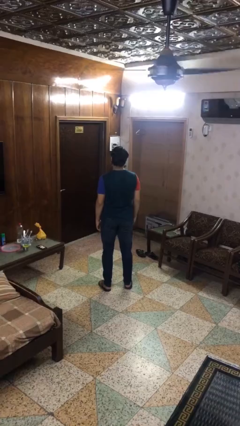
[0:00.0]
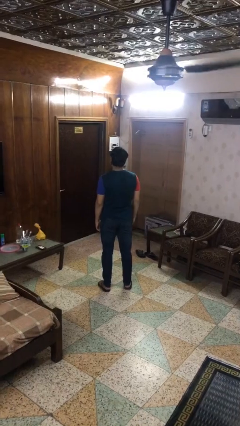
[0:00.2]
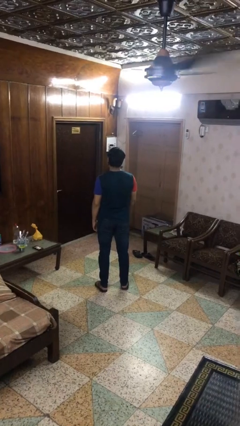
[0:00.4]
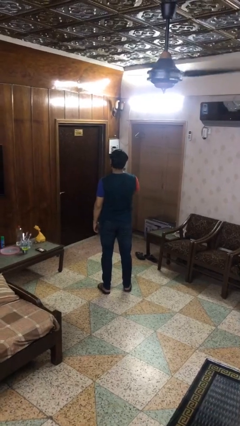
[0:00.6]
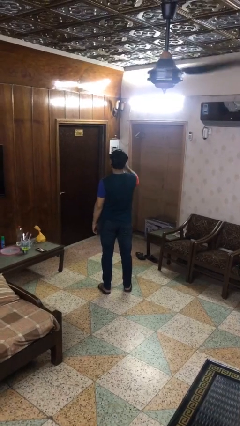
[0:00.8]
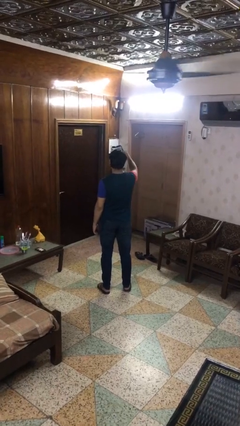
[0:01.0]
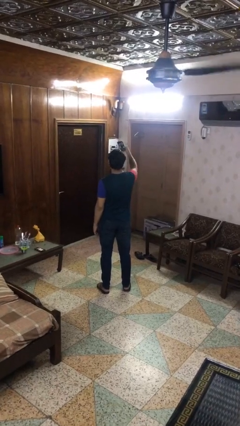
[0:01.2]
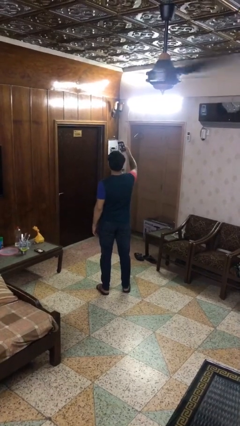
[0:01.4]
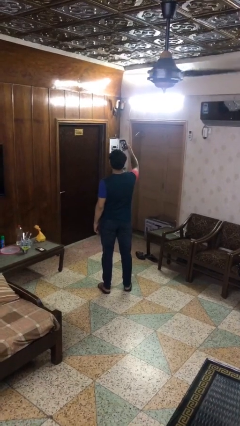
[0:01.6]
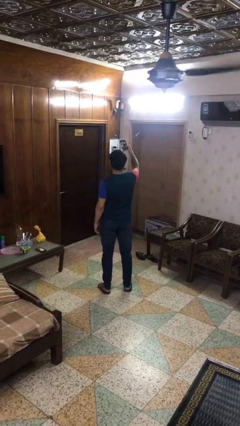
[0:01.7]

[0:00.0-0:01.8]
person takes selfie

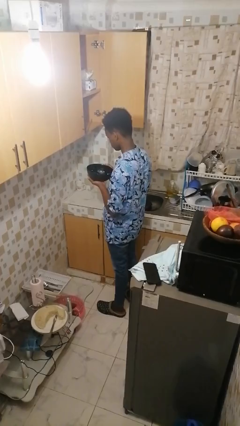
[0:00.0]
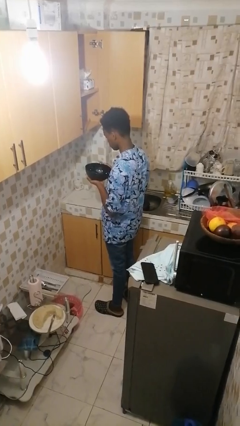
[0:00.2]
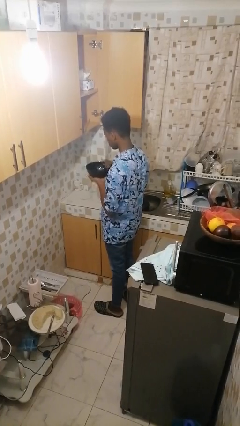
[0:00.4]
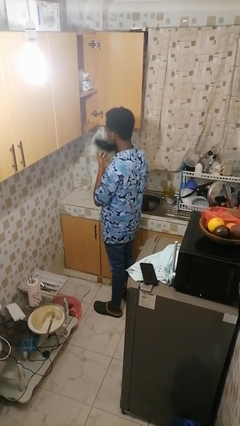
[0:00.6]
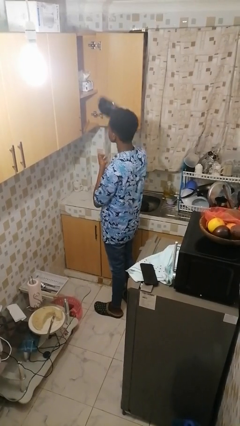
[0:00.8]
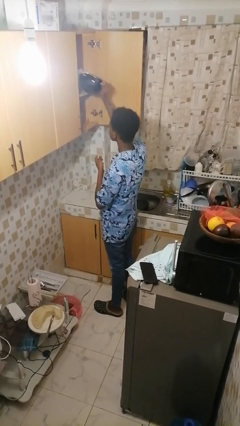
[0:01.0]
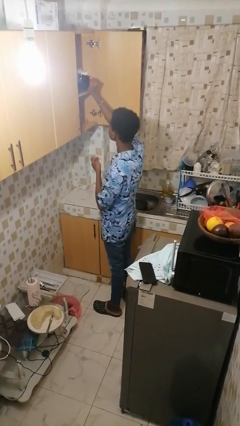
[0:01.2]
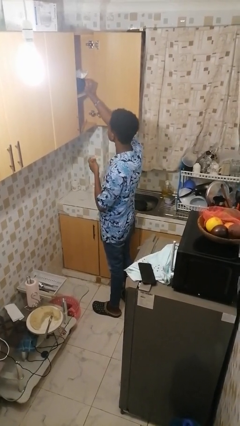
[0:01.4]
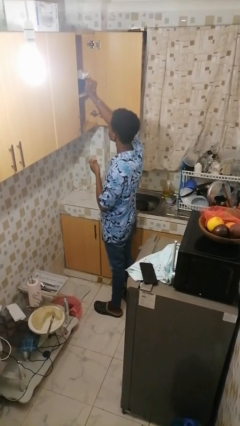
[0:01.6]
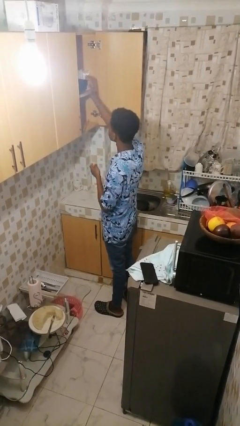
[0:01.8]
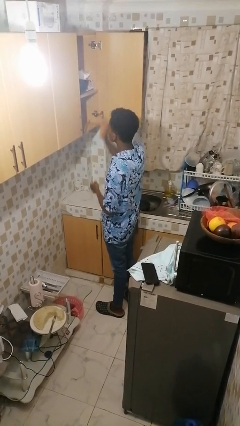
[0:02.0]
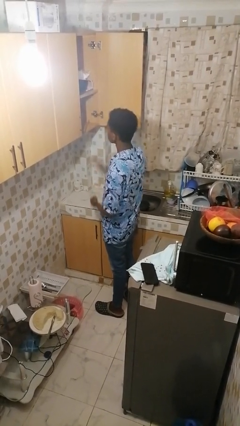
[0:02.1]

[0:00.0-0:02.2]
person puts down object into cabinet

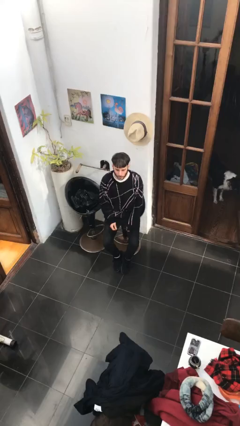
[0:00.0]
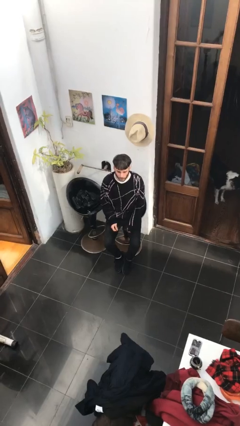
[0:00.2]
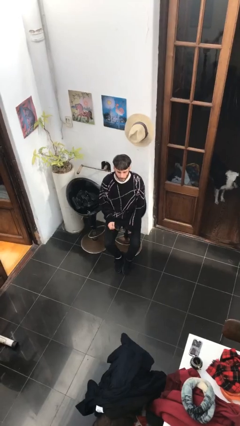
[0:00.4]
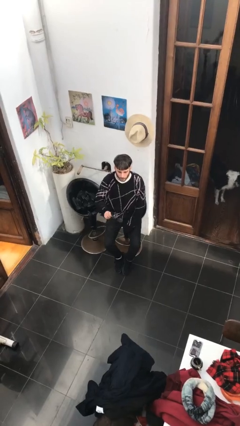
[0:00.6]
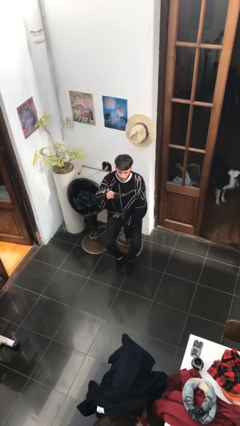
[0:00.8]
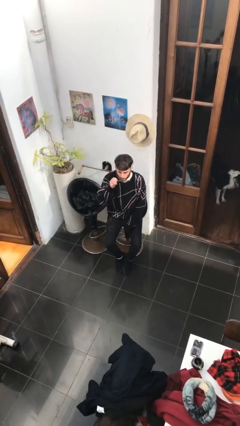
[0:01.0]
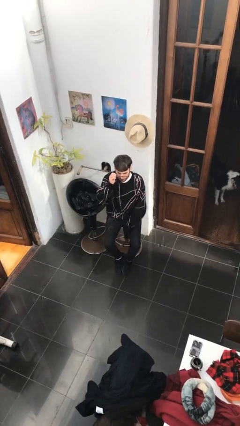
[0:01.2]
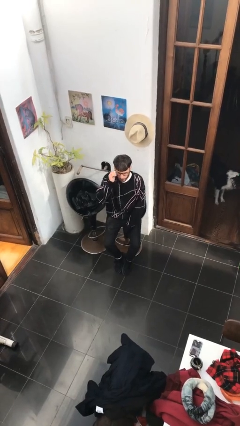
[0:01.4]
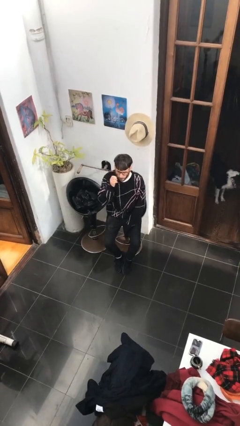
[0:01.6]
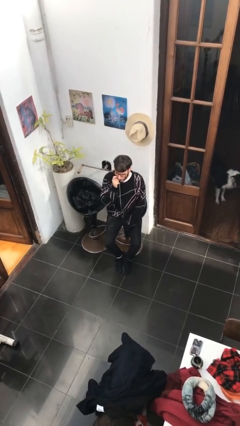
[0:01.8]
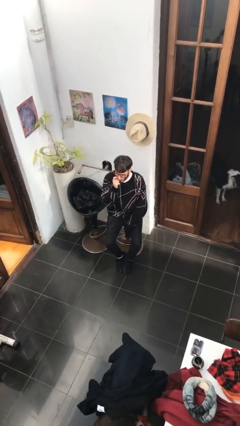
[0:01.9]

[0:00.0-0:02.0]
person puts on glasses

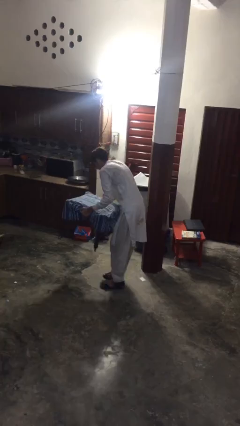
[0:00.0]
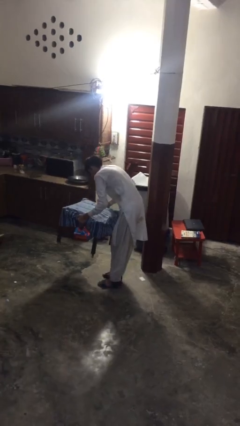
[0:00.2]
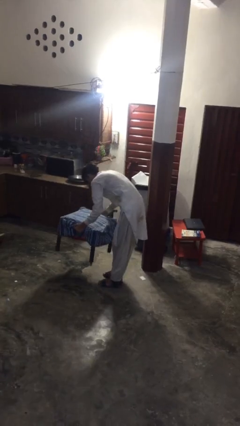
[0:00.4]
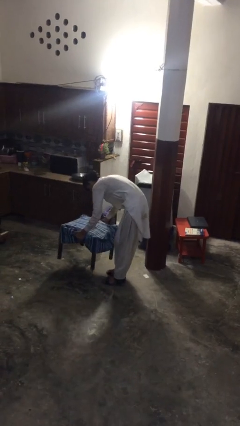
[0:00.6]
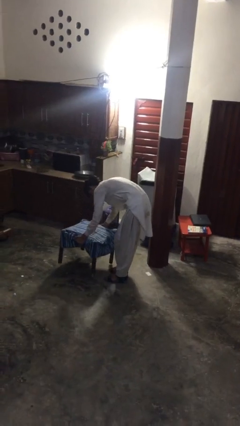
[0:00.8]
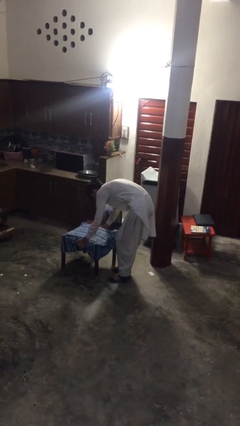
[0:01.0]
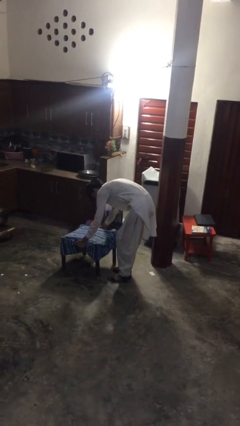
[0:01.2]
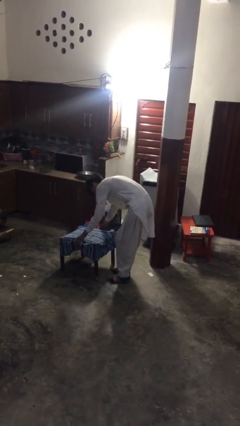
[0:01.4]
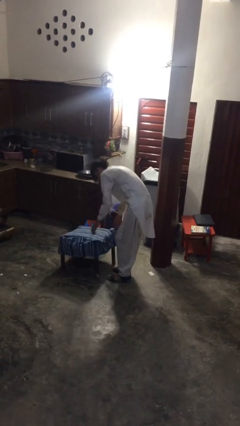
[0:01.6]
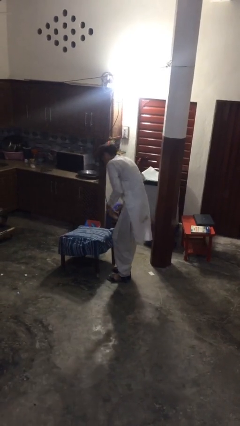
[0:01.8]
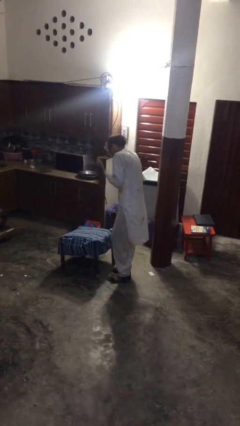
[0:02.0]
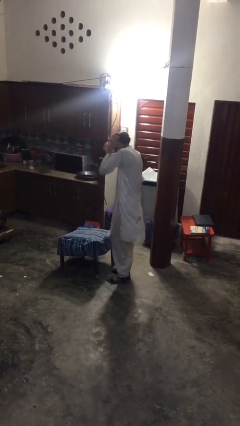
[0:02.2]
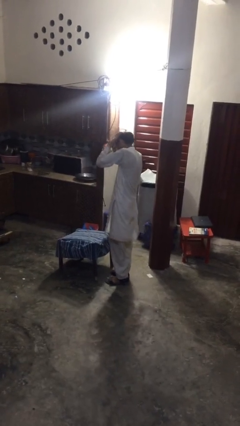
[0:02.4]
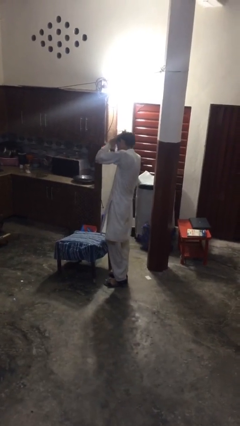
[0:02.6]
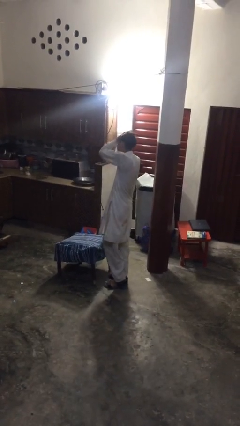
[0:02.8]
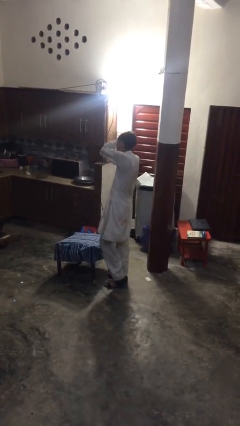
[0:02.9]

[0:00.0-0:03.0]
person puts down object on floor

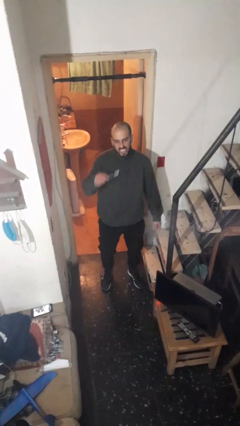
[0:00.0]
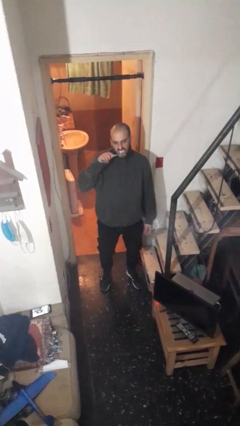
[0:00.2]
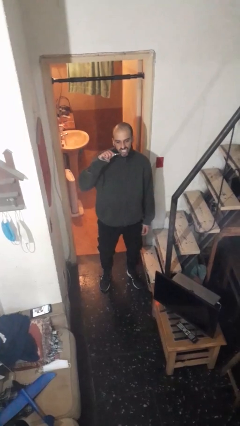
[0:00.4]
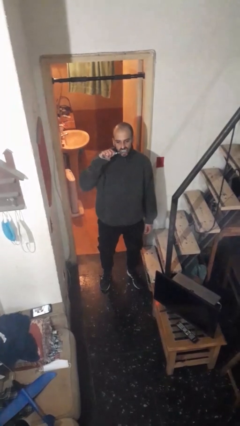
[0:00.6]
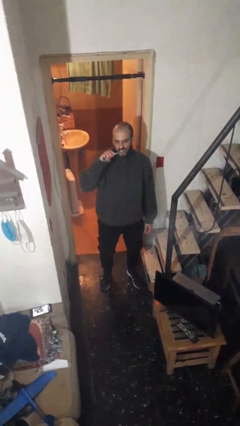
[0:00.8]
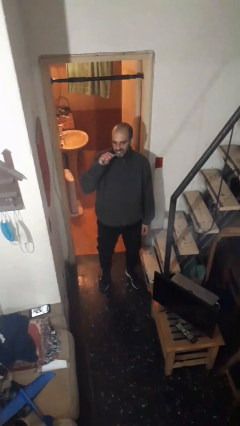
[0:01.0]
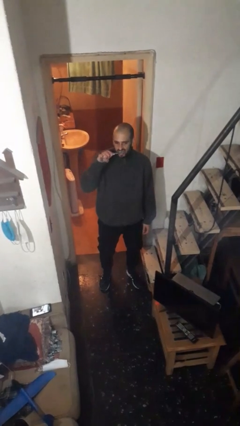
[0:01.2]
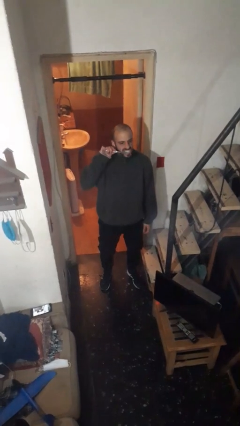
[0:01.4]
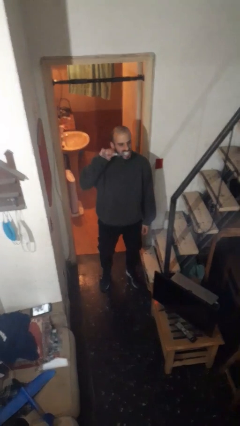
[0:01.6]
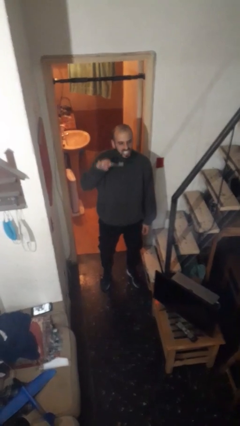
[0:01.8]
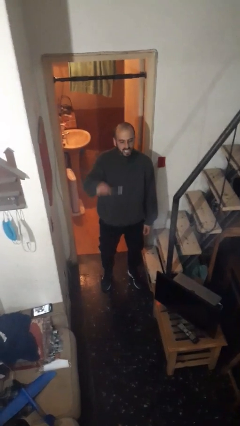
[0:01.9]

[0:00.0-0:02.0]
person brushes teeth

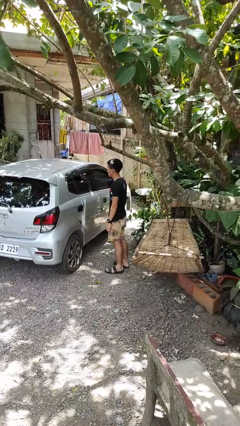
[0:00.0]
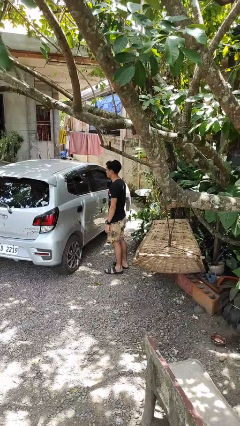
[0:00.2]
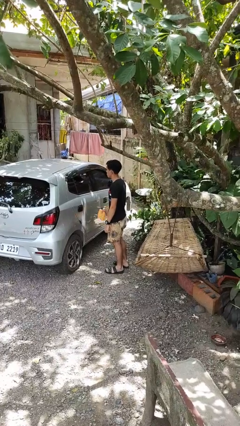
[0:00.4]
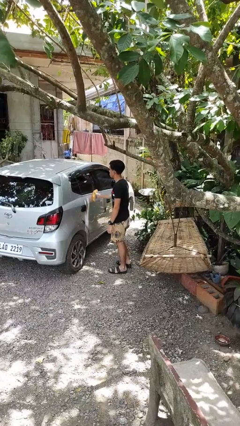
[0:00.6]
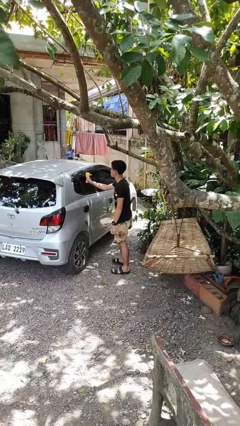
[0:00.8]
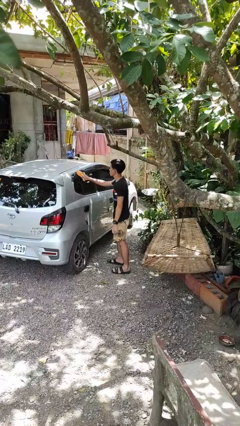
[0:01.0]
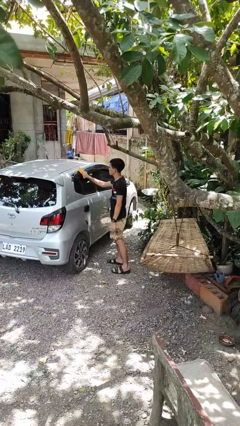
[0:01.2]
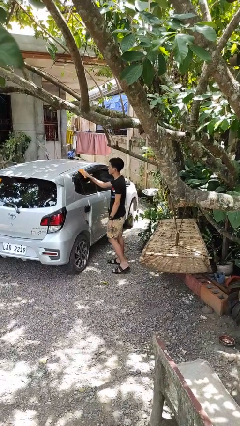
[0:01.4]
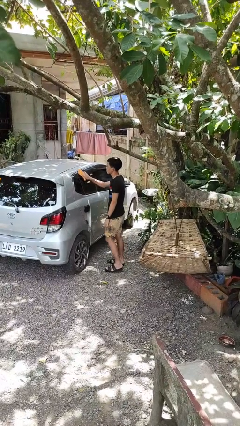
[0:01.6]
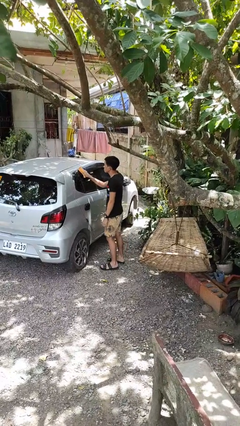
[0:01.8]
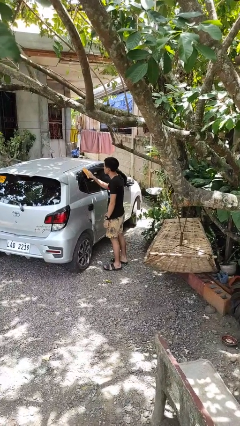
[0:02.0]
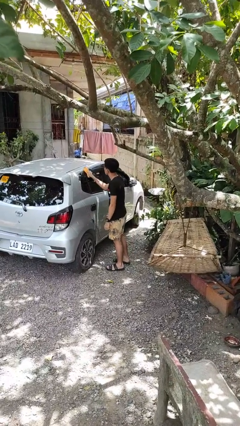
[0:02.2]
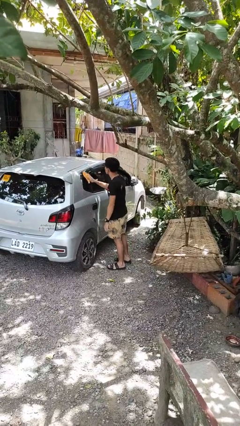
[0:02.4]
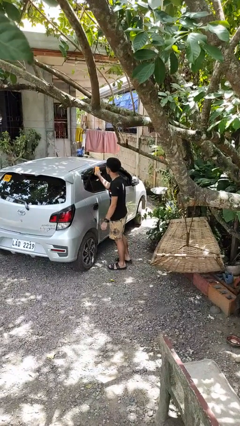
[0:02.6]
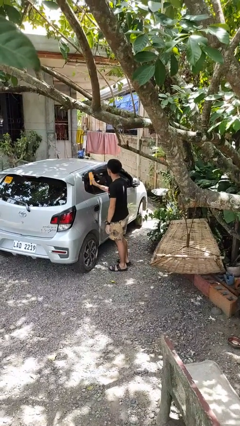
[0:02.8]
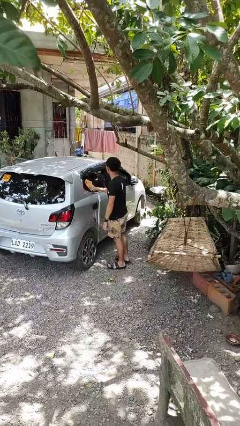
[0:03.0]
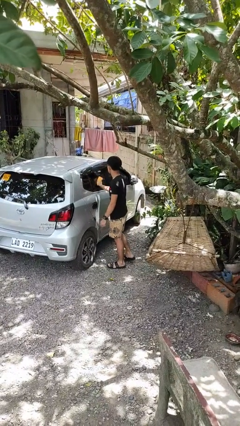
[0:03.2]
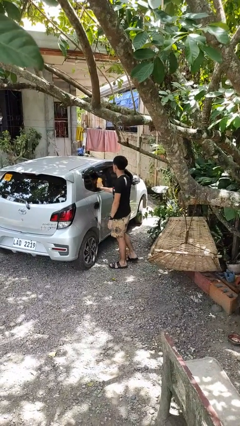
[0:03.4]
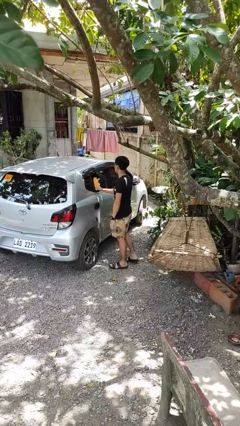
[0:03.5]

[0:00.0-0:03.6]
person polishes car with rag

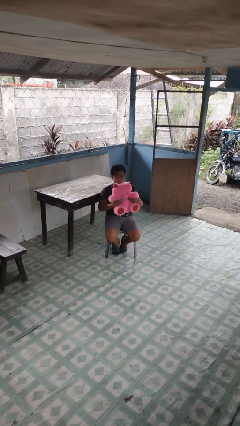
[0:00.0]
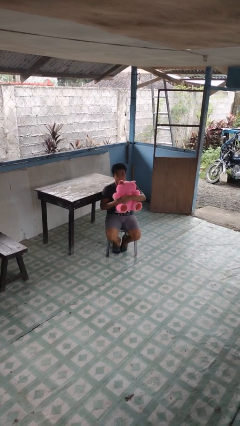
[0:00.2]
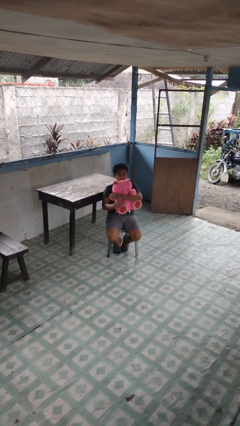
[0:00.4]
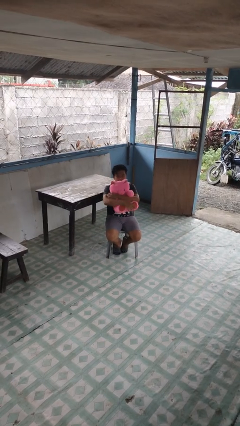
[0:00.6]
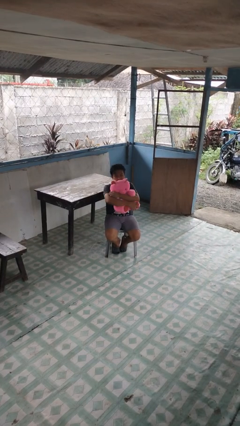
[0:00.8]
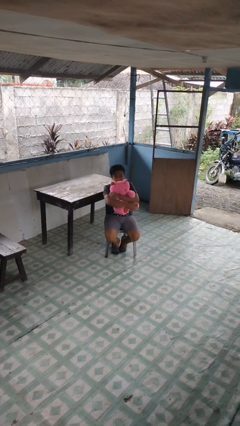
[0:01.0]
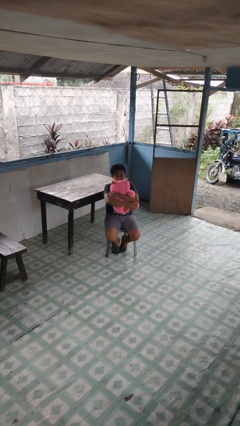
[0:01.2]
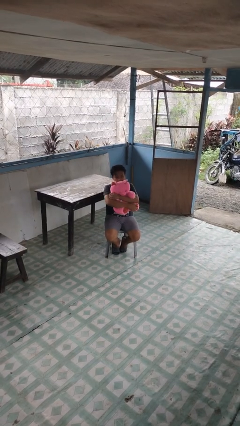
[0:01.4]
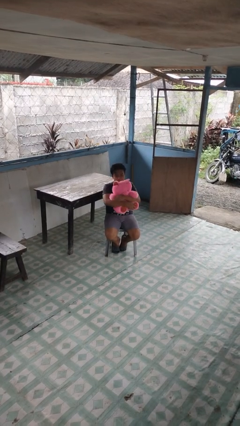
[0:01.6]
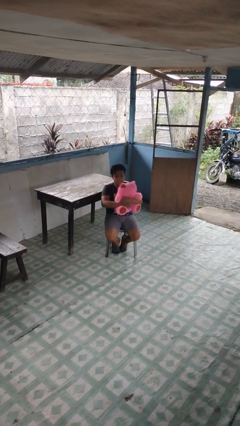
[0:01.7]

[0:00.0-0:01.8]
person hugs stuffed animal

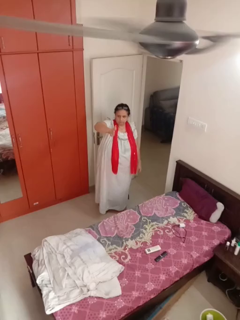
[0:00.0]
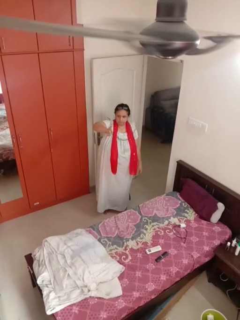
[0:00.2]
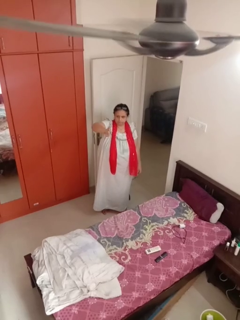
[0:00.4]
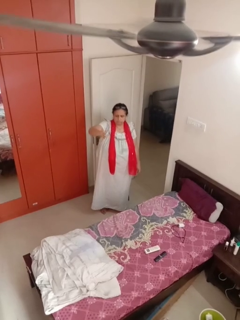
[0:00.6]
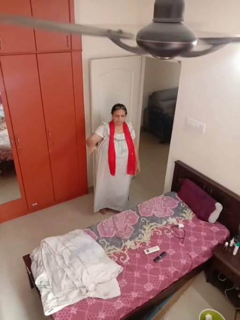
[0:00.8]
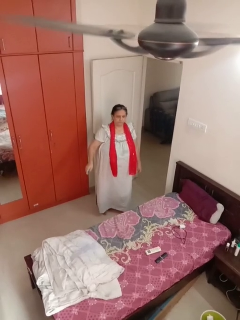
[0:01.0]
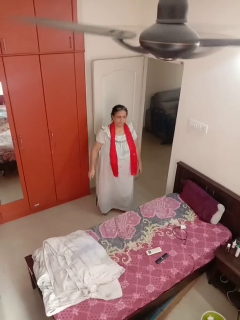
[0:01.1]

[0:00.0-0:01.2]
person gestures swipe right
